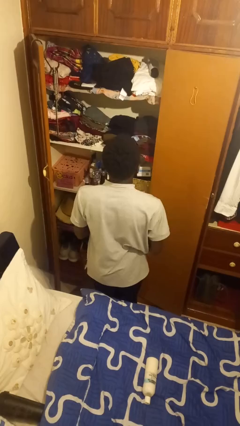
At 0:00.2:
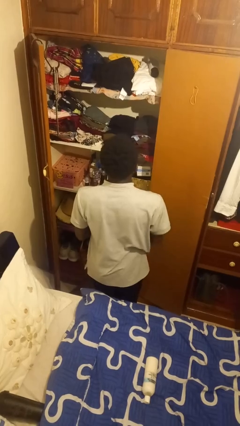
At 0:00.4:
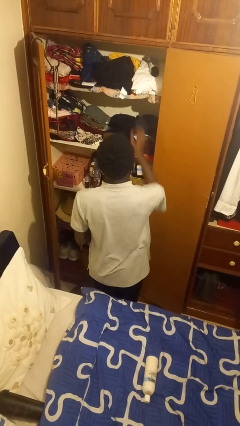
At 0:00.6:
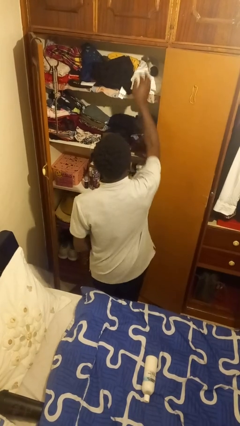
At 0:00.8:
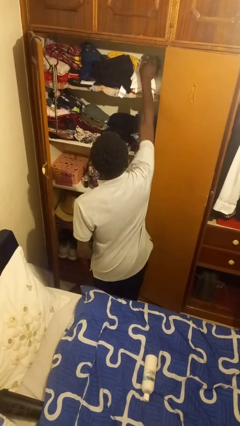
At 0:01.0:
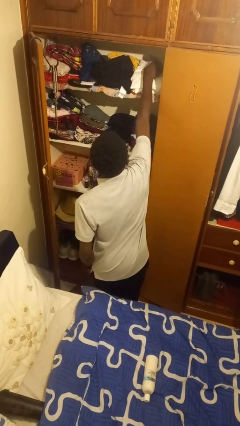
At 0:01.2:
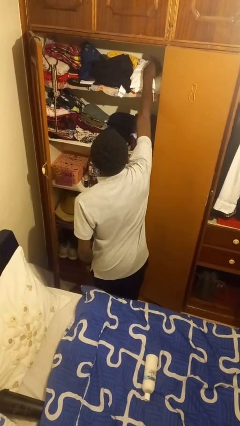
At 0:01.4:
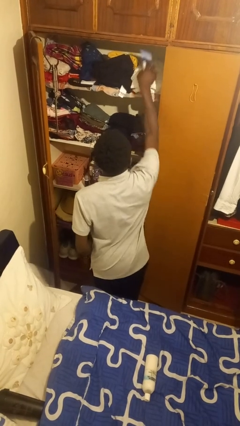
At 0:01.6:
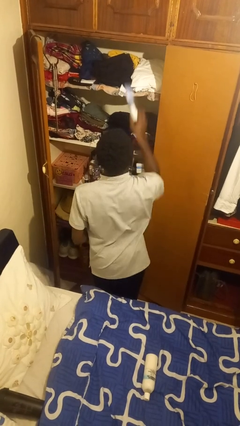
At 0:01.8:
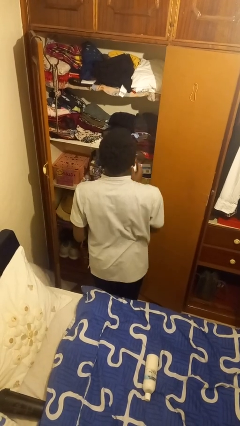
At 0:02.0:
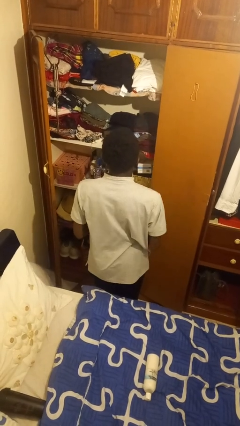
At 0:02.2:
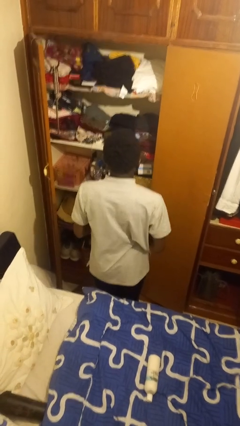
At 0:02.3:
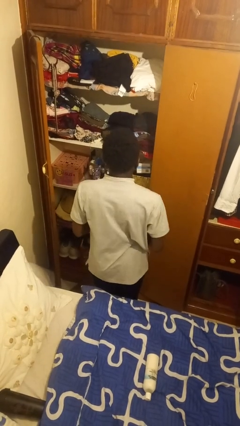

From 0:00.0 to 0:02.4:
person picks up object from shelf

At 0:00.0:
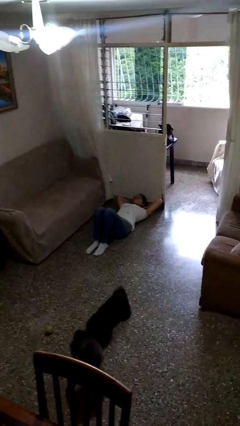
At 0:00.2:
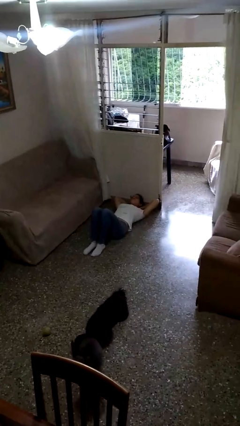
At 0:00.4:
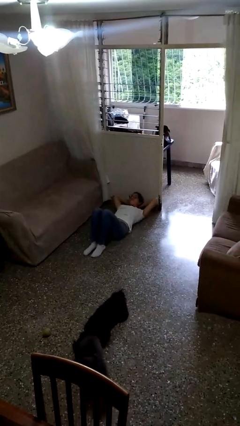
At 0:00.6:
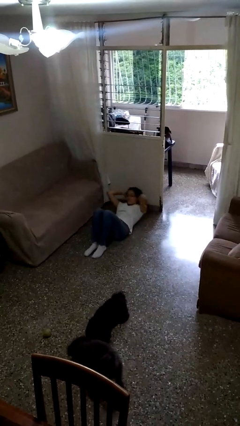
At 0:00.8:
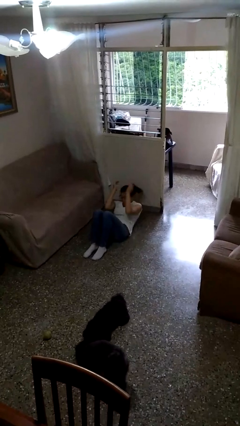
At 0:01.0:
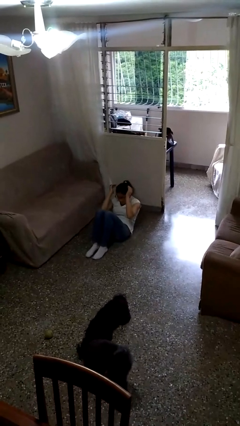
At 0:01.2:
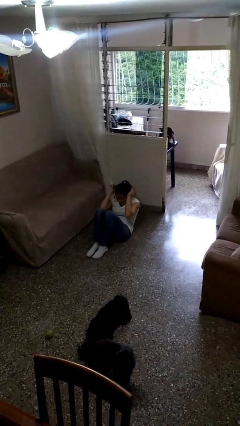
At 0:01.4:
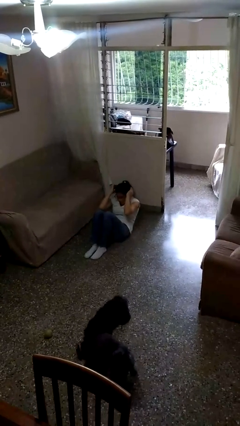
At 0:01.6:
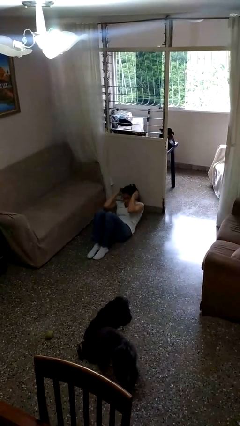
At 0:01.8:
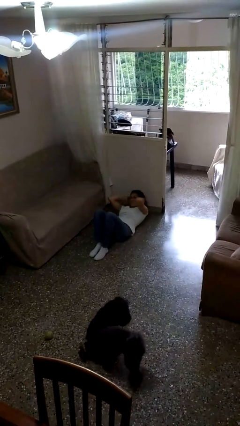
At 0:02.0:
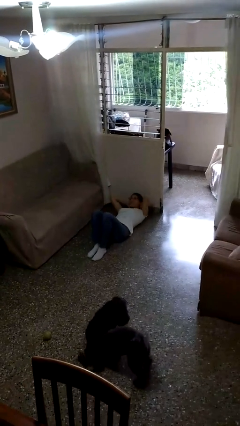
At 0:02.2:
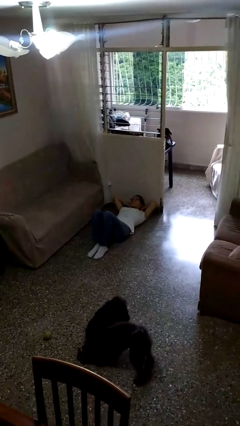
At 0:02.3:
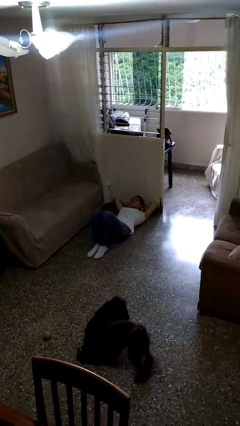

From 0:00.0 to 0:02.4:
person exercises with situp

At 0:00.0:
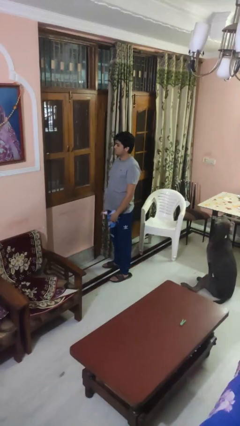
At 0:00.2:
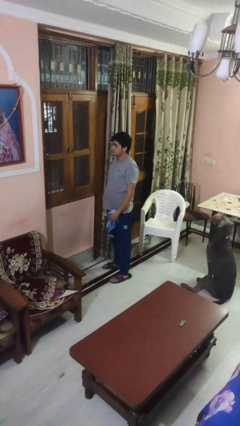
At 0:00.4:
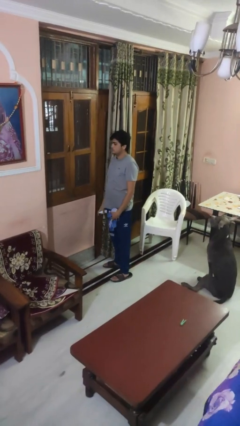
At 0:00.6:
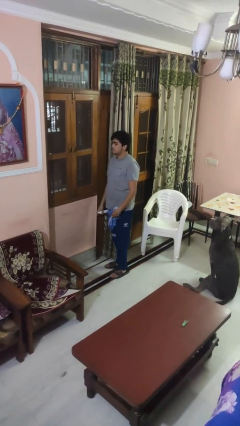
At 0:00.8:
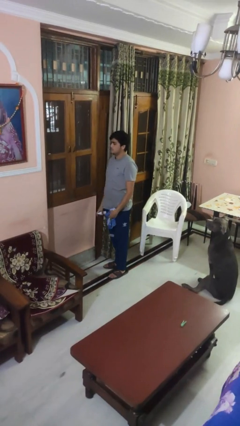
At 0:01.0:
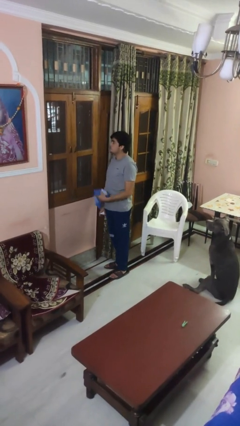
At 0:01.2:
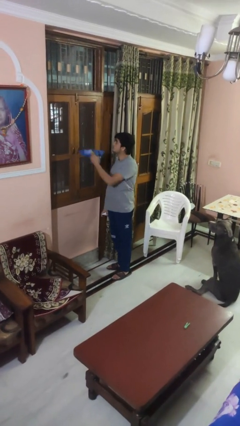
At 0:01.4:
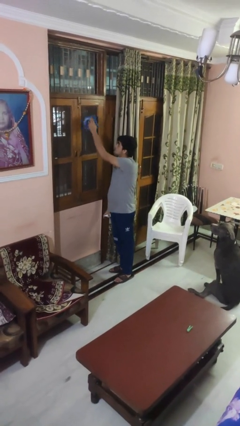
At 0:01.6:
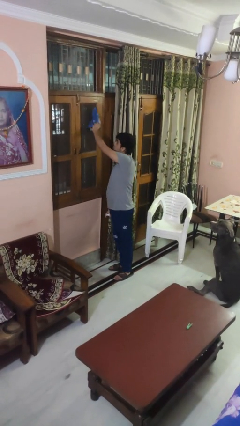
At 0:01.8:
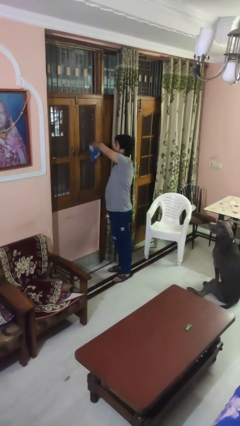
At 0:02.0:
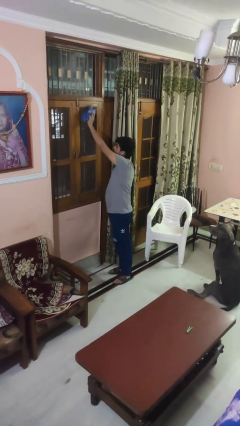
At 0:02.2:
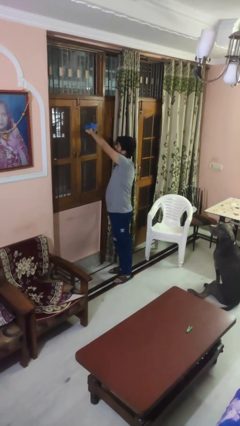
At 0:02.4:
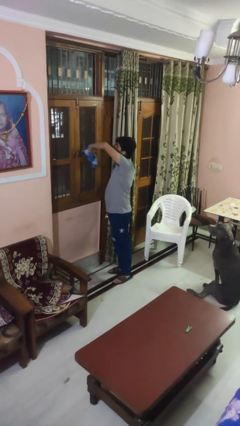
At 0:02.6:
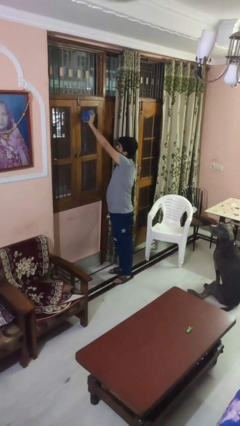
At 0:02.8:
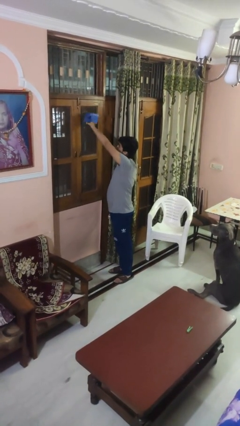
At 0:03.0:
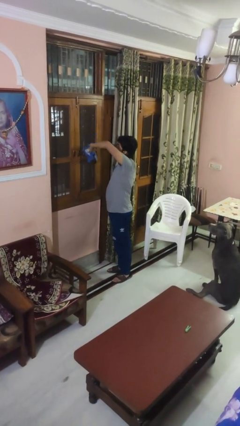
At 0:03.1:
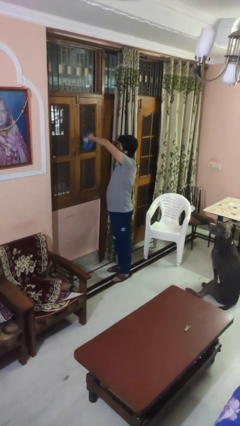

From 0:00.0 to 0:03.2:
person washes window

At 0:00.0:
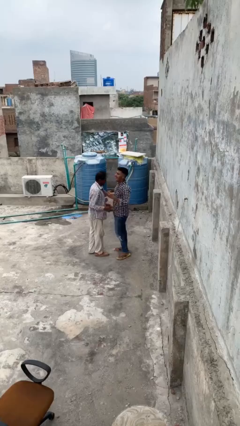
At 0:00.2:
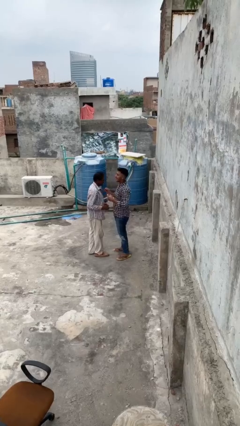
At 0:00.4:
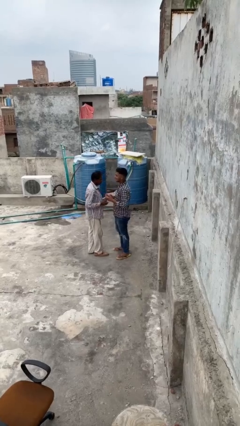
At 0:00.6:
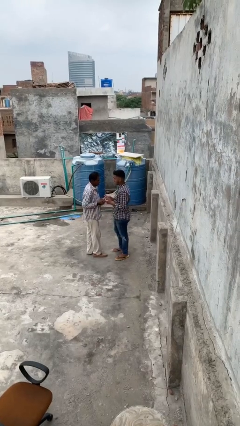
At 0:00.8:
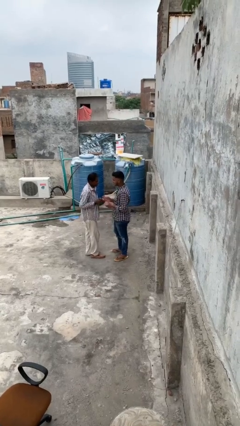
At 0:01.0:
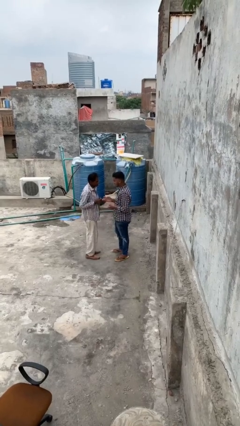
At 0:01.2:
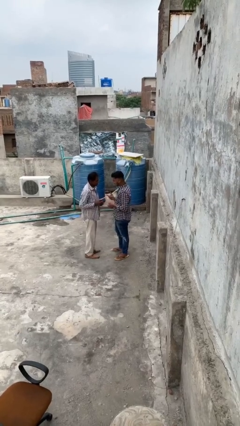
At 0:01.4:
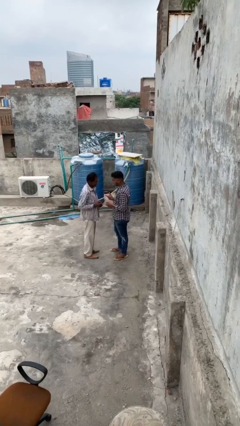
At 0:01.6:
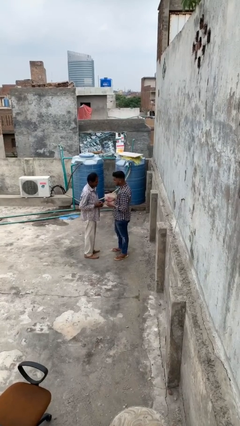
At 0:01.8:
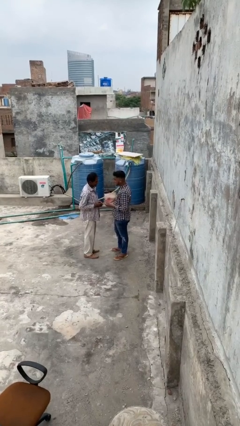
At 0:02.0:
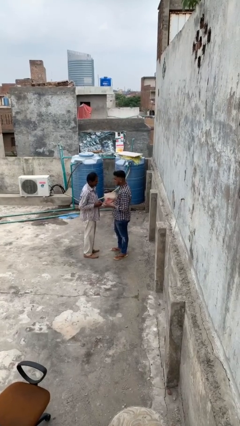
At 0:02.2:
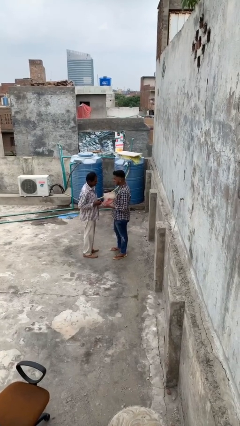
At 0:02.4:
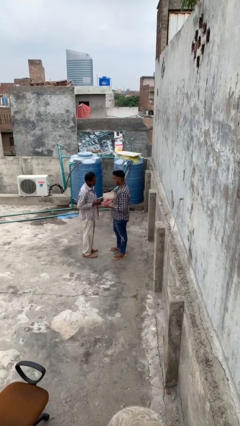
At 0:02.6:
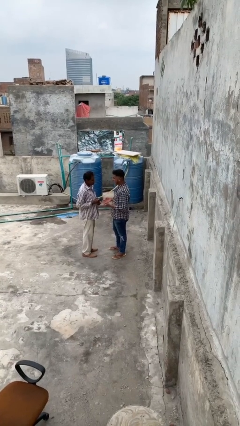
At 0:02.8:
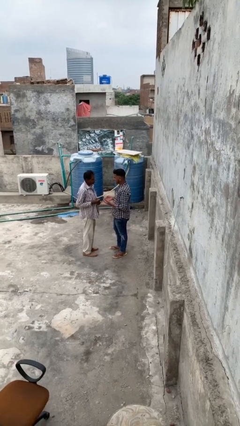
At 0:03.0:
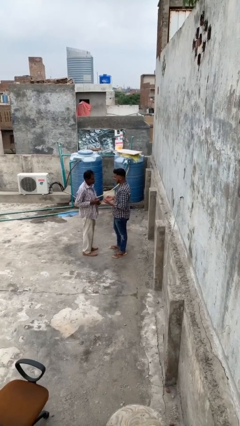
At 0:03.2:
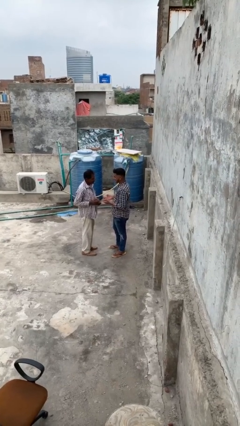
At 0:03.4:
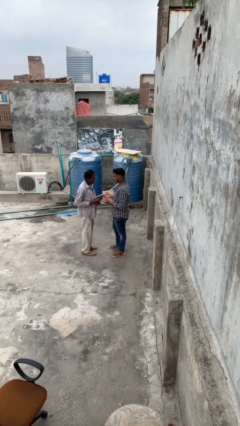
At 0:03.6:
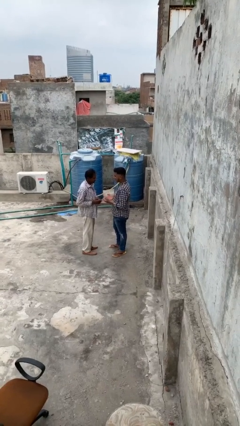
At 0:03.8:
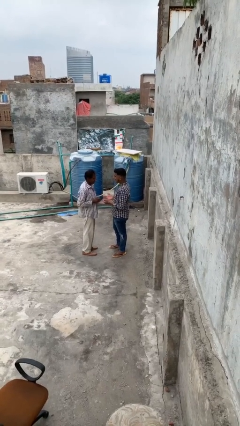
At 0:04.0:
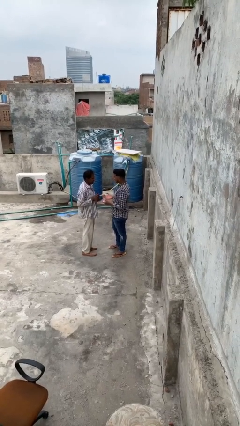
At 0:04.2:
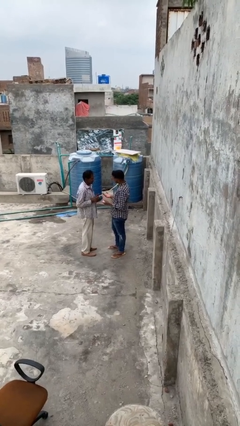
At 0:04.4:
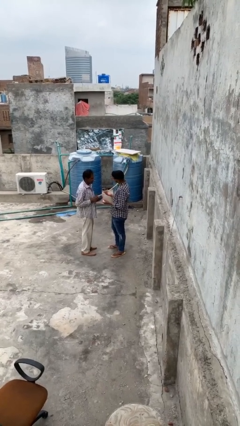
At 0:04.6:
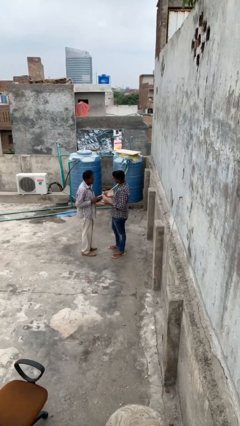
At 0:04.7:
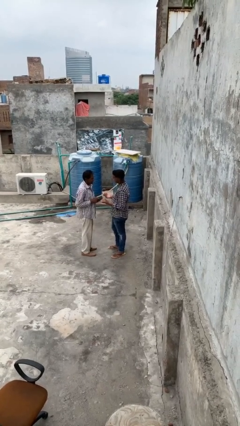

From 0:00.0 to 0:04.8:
person talks to person

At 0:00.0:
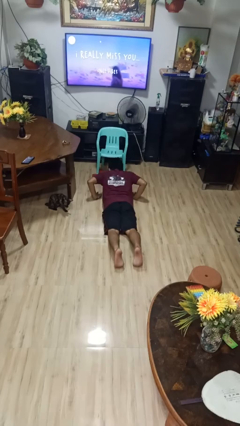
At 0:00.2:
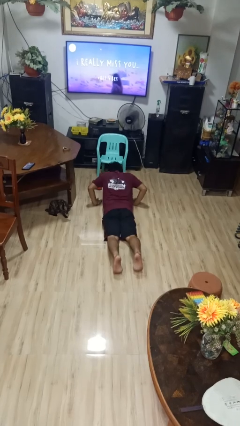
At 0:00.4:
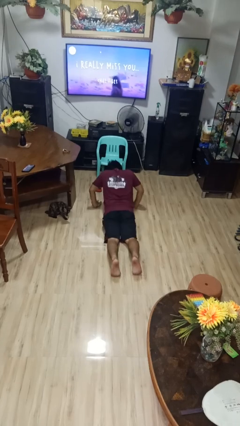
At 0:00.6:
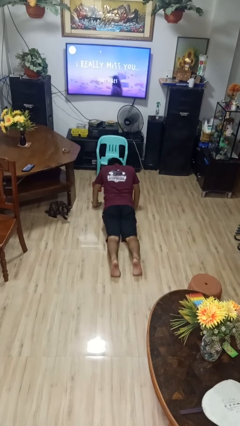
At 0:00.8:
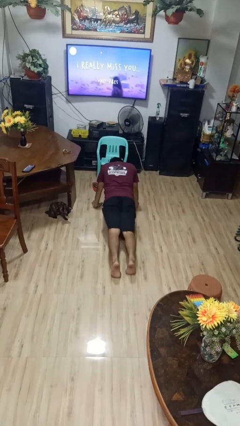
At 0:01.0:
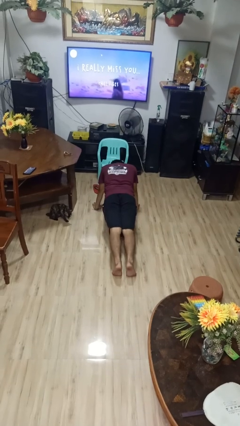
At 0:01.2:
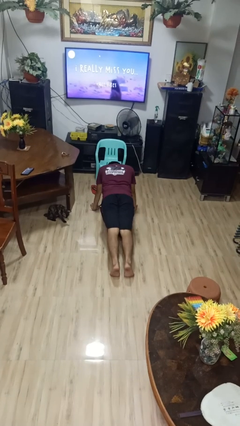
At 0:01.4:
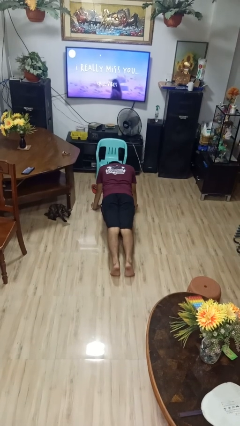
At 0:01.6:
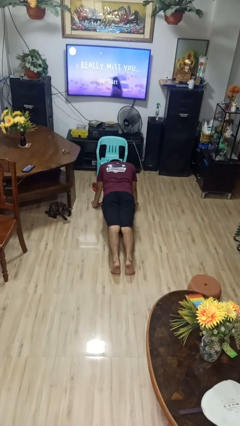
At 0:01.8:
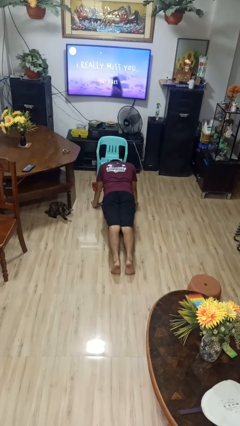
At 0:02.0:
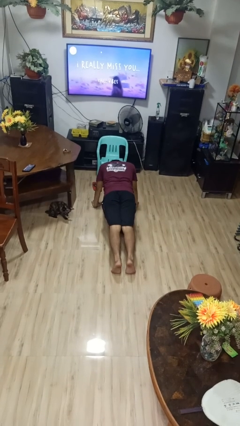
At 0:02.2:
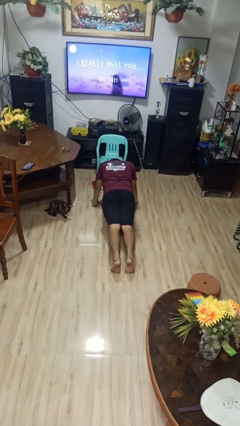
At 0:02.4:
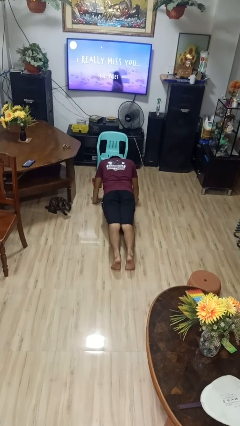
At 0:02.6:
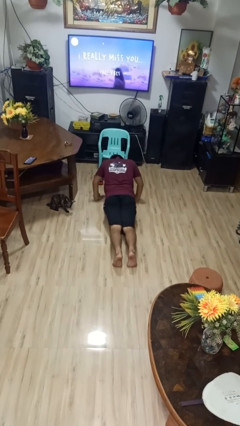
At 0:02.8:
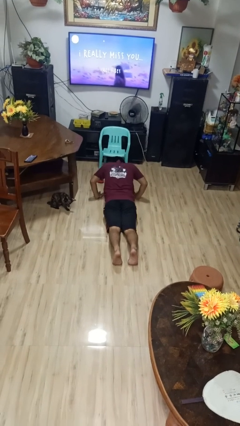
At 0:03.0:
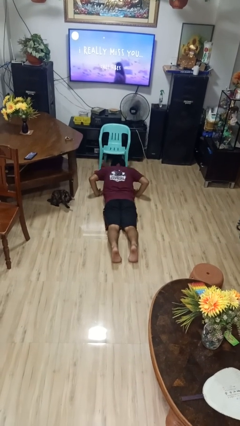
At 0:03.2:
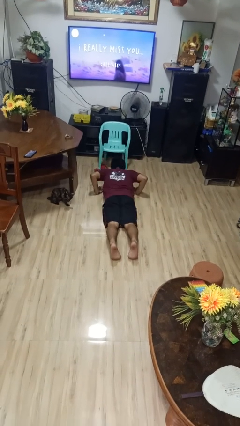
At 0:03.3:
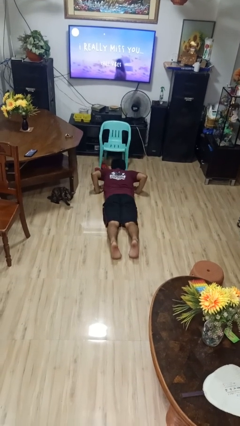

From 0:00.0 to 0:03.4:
person exercises with pushup

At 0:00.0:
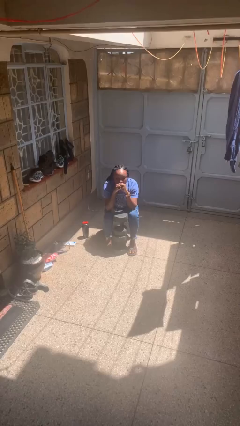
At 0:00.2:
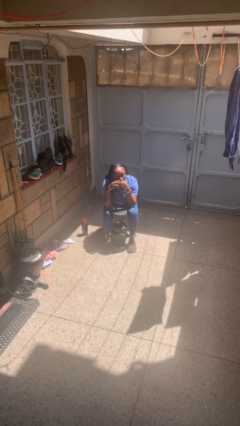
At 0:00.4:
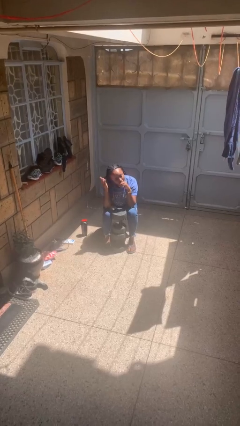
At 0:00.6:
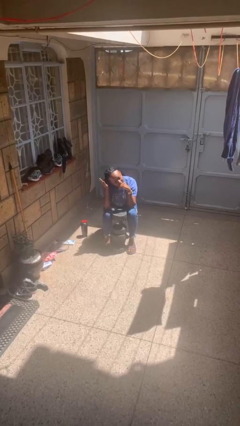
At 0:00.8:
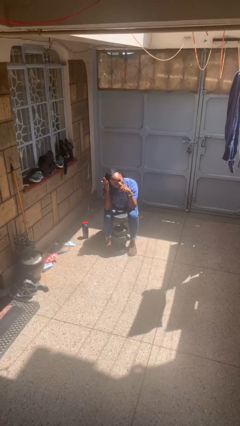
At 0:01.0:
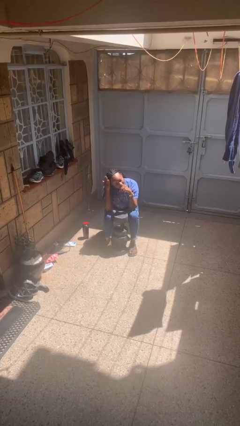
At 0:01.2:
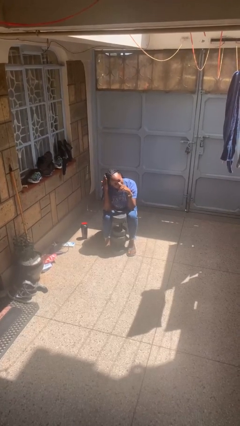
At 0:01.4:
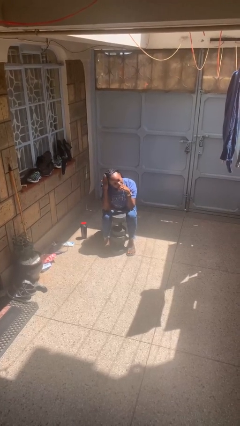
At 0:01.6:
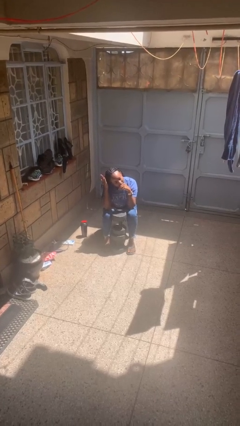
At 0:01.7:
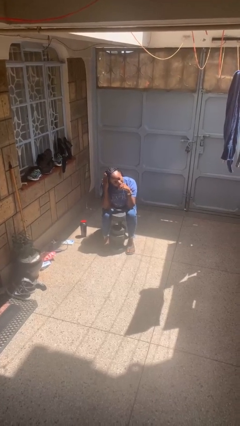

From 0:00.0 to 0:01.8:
person pats head
